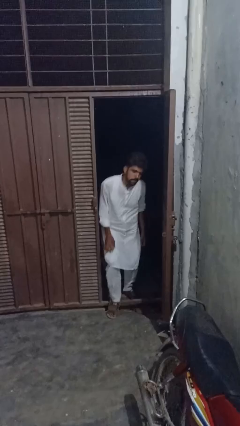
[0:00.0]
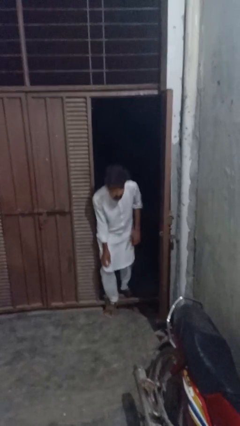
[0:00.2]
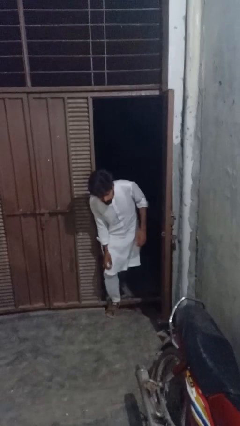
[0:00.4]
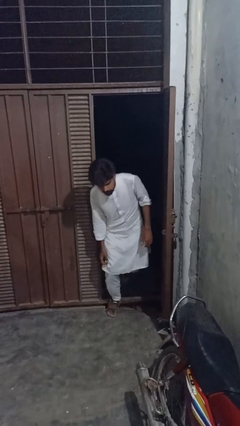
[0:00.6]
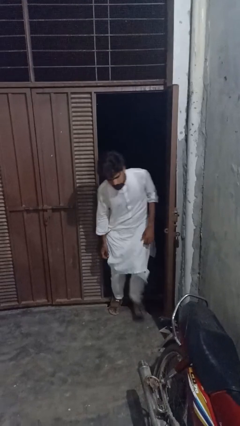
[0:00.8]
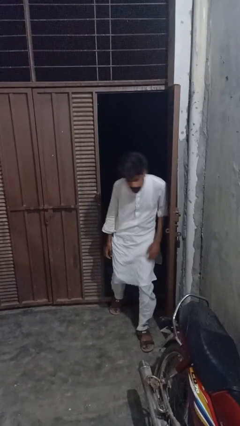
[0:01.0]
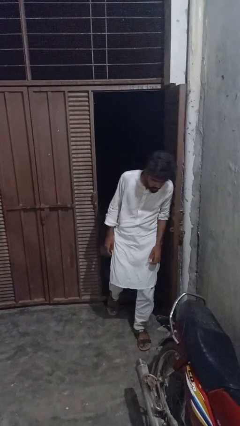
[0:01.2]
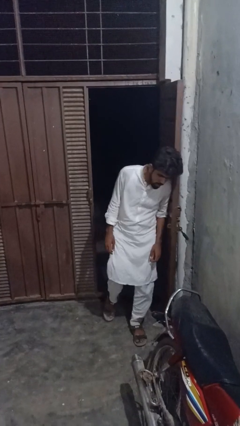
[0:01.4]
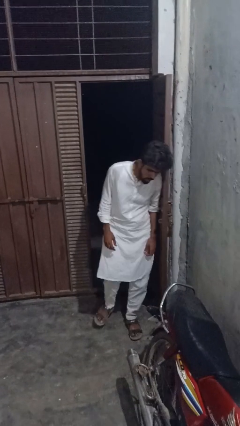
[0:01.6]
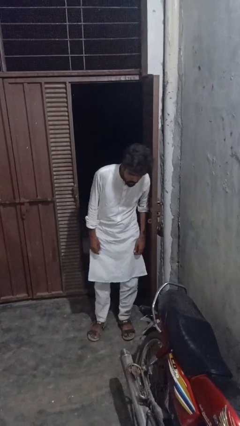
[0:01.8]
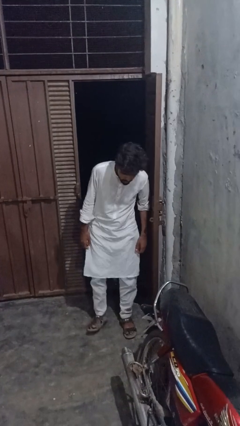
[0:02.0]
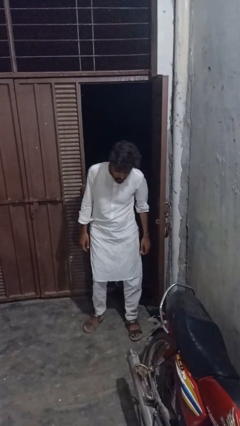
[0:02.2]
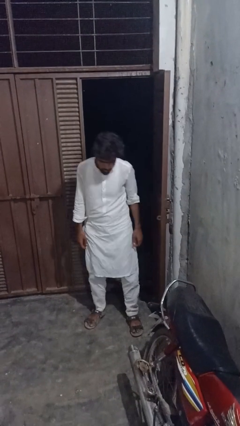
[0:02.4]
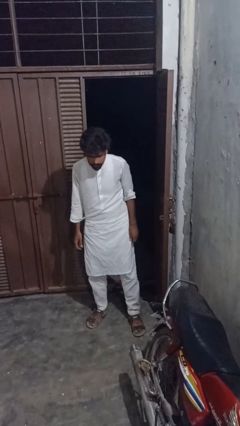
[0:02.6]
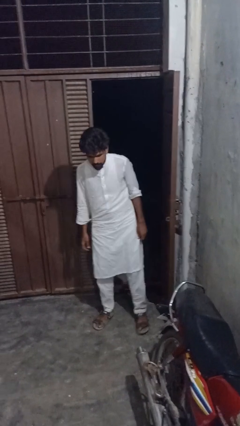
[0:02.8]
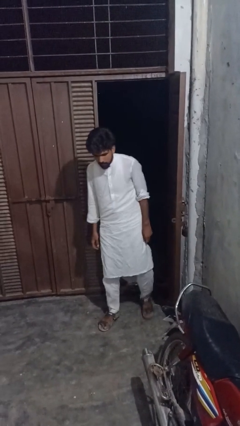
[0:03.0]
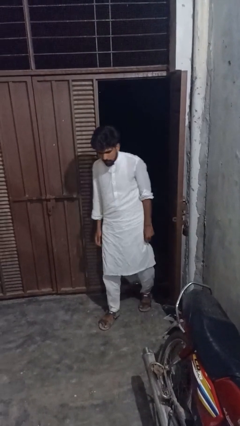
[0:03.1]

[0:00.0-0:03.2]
person bumps into wall

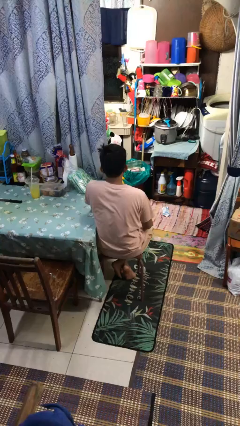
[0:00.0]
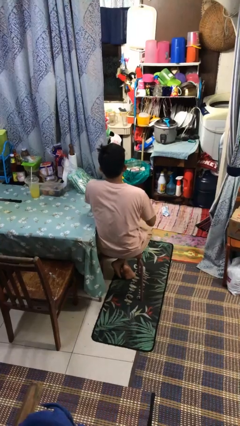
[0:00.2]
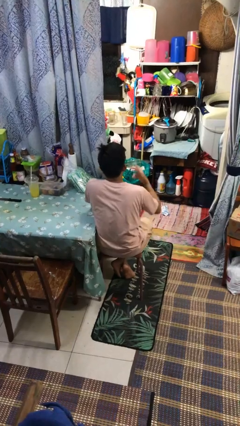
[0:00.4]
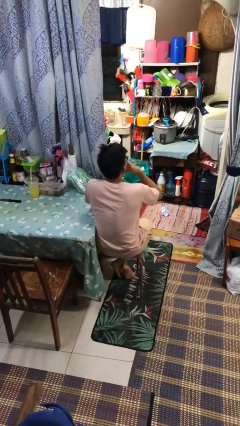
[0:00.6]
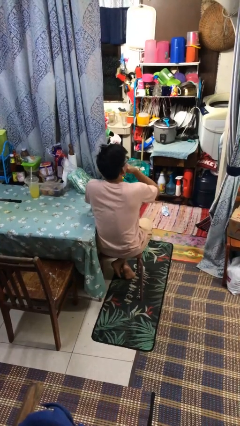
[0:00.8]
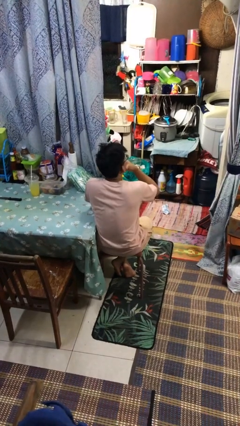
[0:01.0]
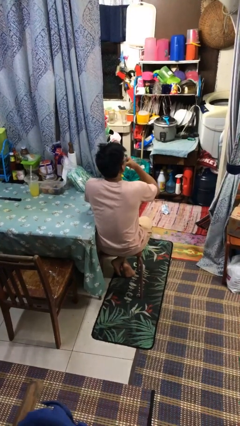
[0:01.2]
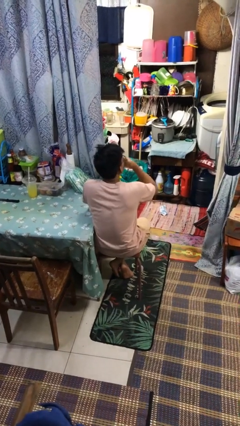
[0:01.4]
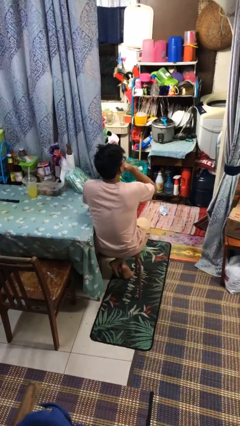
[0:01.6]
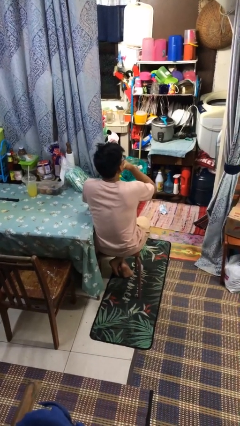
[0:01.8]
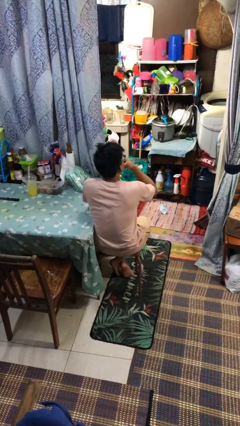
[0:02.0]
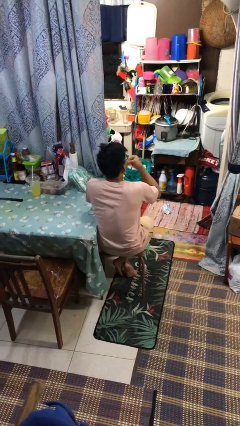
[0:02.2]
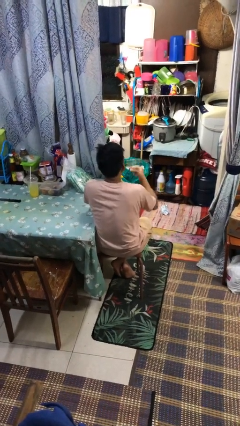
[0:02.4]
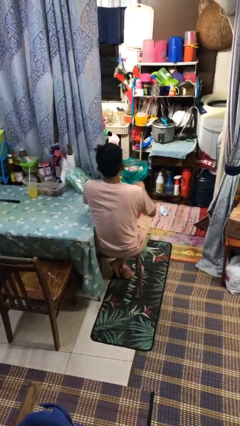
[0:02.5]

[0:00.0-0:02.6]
person strokes chin

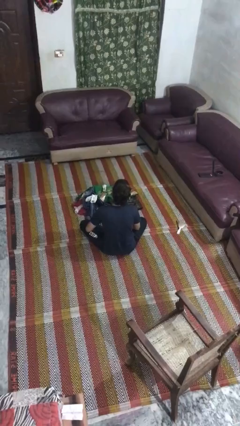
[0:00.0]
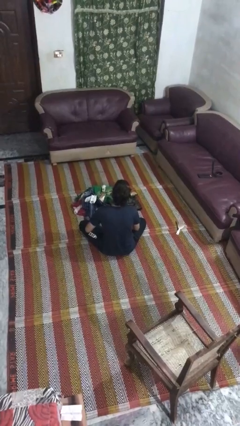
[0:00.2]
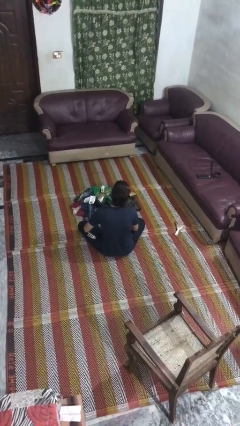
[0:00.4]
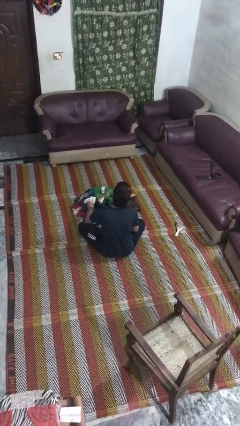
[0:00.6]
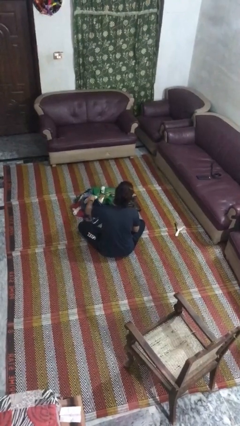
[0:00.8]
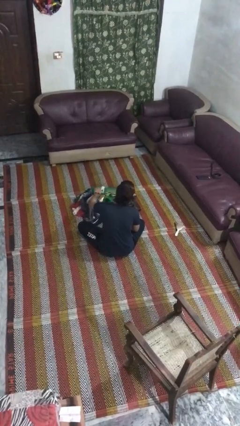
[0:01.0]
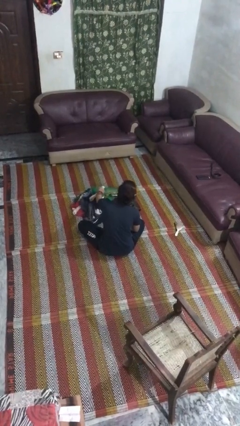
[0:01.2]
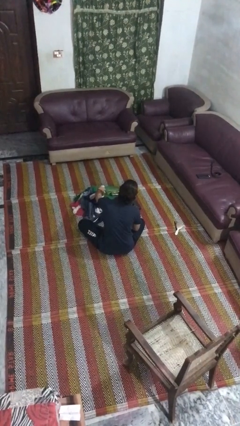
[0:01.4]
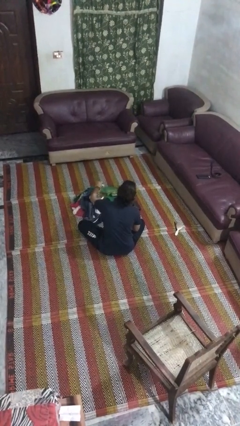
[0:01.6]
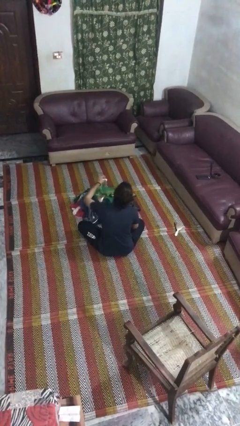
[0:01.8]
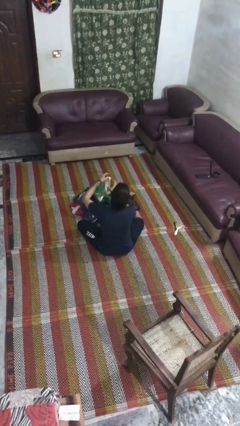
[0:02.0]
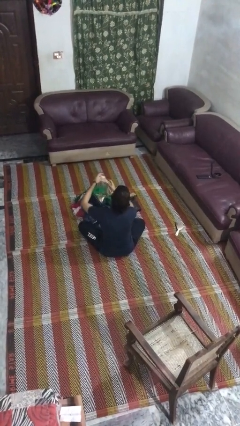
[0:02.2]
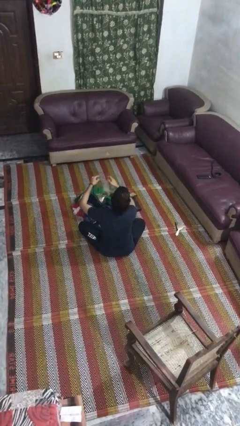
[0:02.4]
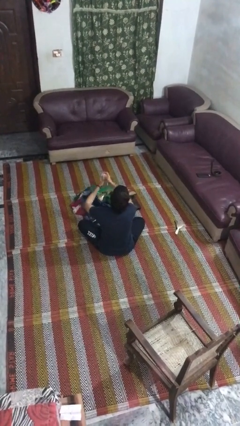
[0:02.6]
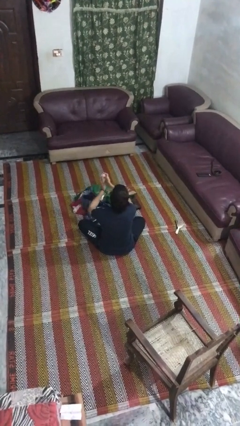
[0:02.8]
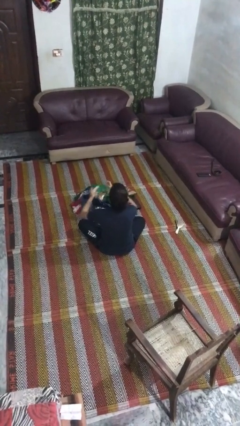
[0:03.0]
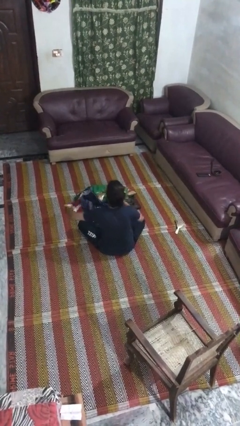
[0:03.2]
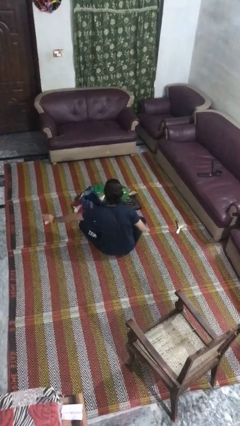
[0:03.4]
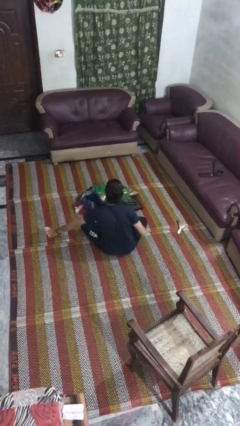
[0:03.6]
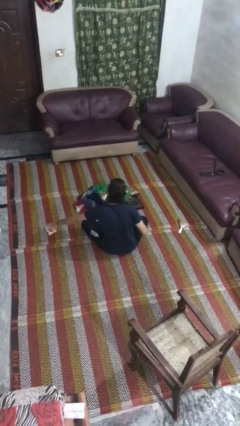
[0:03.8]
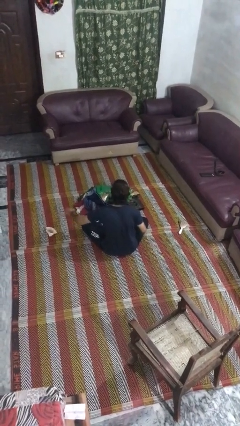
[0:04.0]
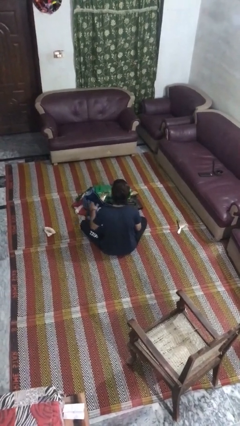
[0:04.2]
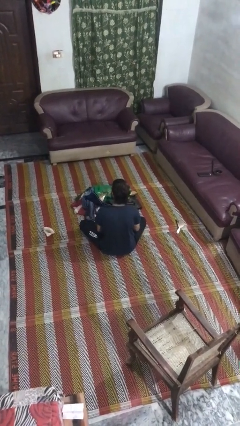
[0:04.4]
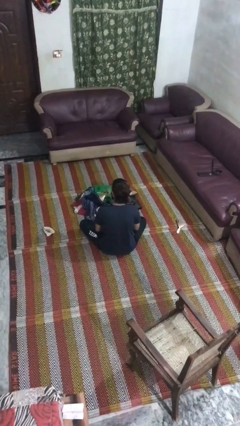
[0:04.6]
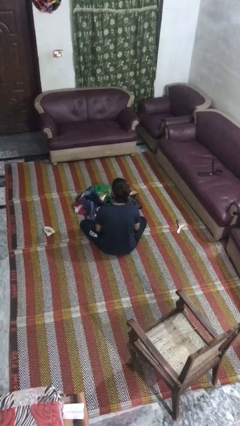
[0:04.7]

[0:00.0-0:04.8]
person folds socks

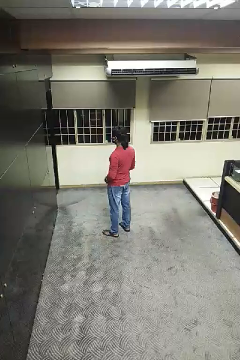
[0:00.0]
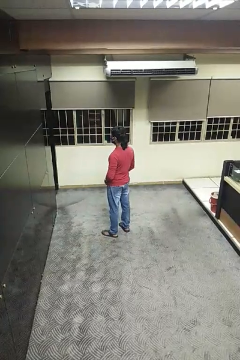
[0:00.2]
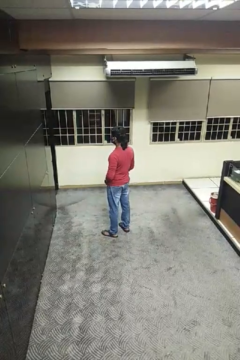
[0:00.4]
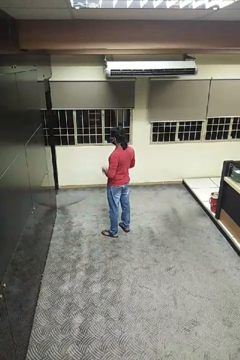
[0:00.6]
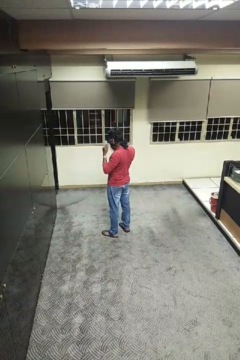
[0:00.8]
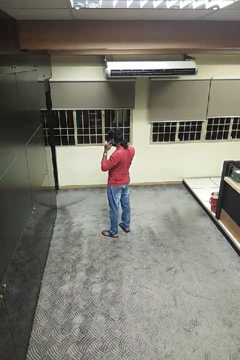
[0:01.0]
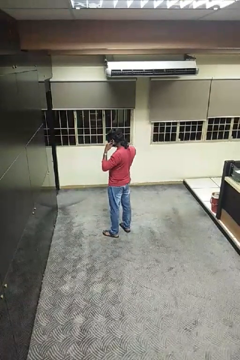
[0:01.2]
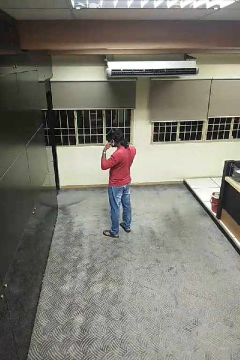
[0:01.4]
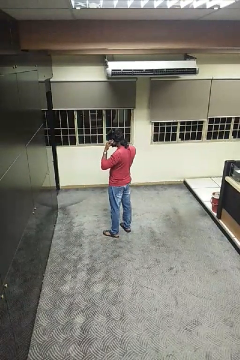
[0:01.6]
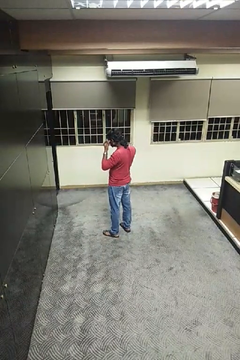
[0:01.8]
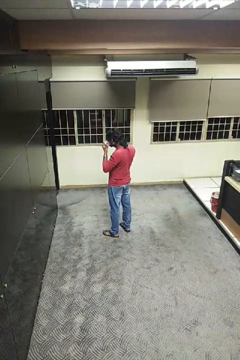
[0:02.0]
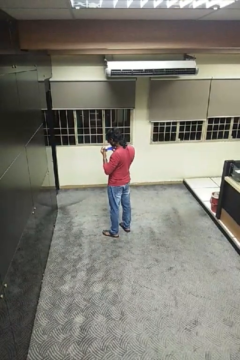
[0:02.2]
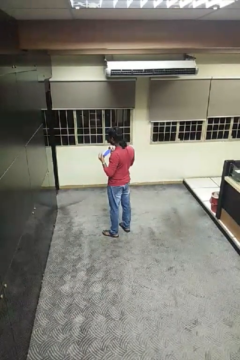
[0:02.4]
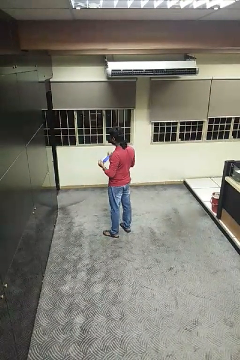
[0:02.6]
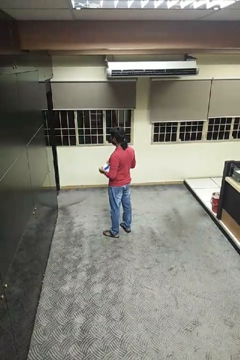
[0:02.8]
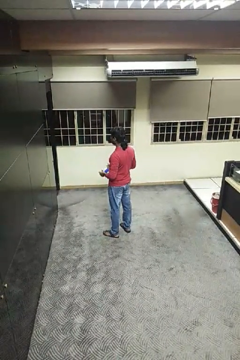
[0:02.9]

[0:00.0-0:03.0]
person takes off facemask

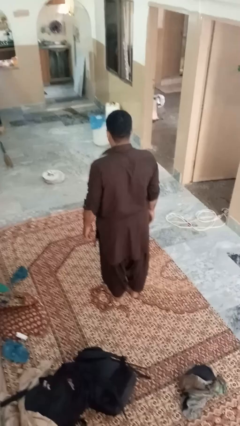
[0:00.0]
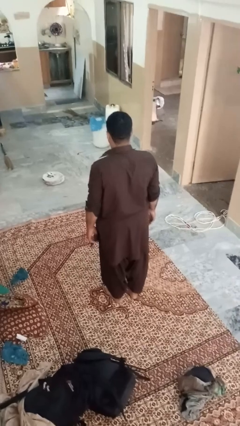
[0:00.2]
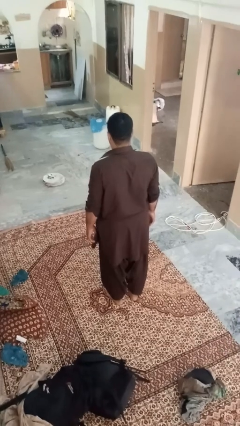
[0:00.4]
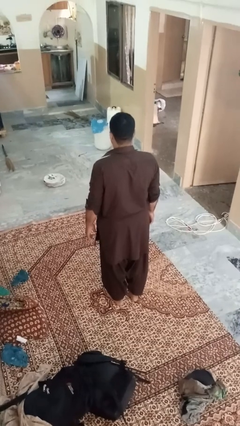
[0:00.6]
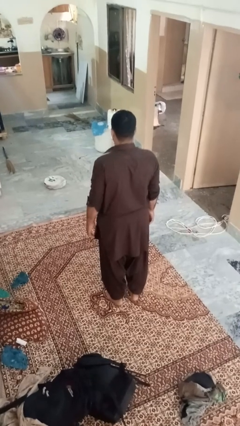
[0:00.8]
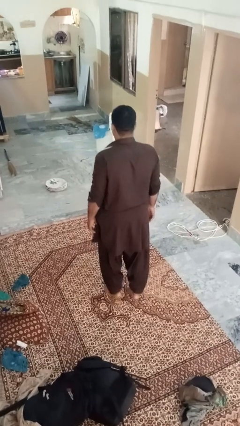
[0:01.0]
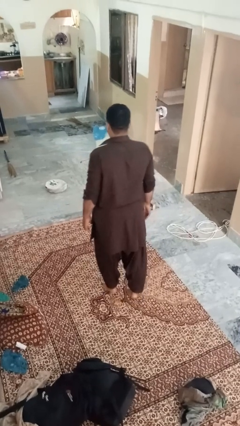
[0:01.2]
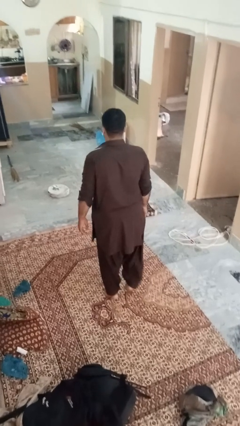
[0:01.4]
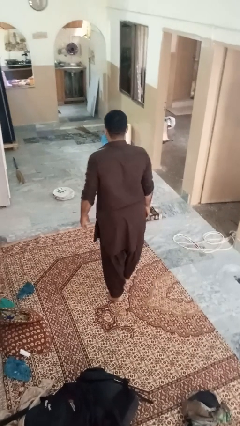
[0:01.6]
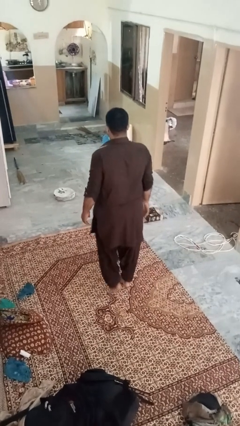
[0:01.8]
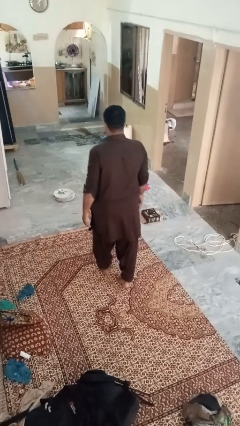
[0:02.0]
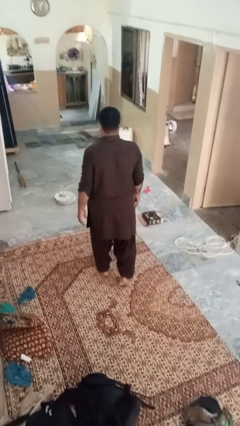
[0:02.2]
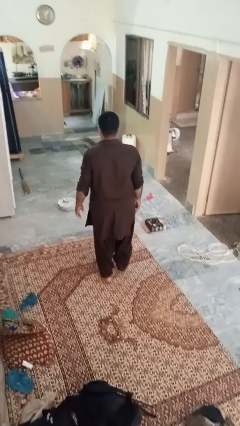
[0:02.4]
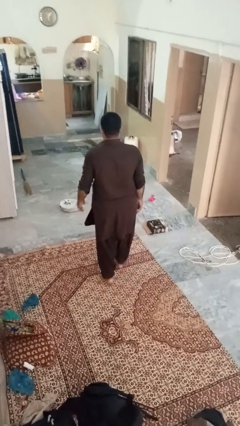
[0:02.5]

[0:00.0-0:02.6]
person walks tiptoe

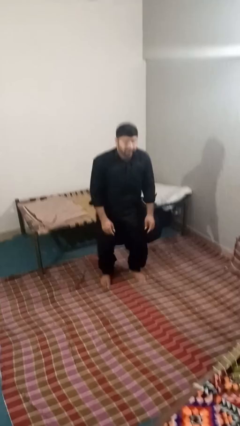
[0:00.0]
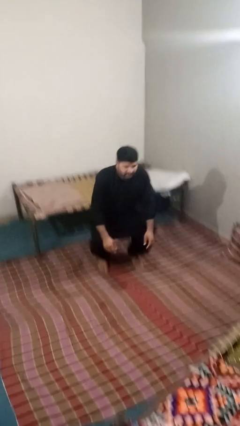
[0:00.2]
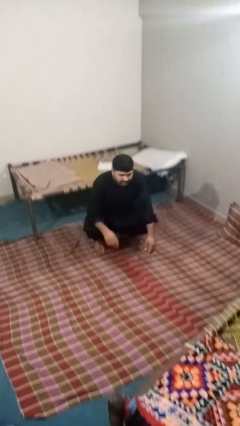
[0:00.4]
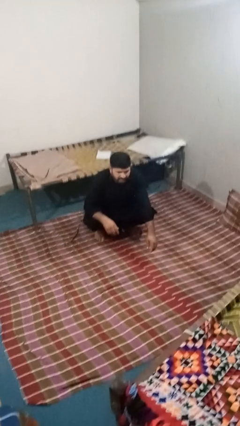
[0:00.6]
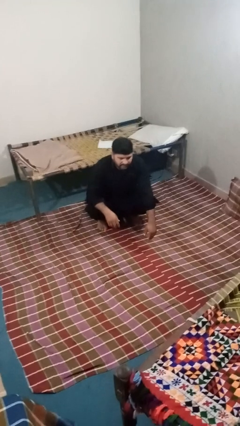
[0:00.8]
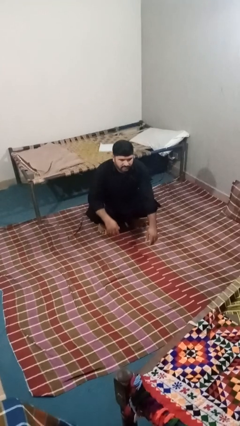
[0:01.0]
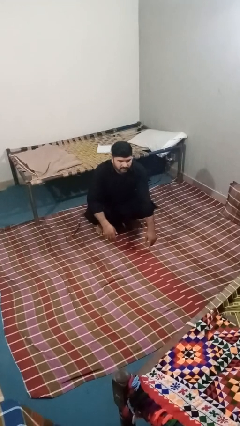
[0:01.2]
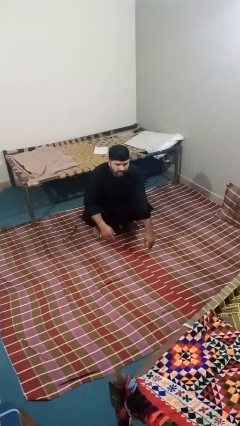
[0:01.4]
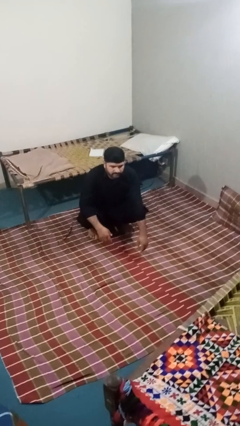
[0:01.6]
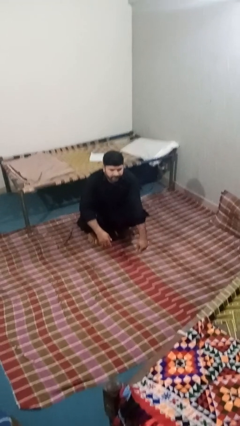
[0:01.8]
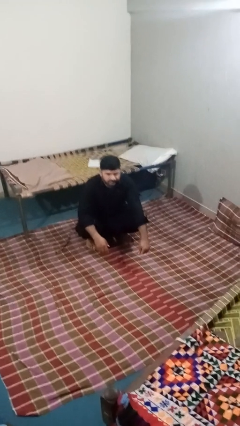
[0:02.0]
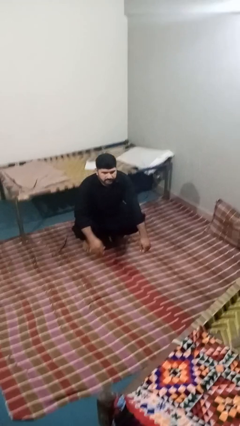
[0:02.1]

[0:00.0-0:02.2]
person squats
